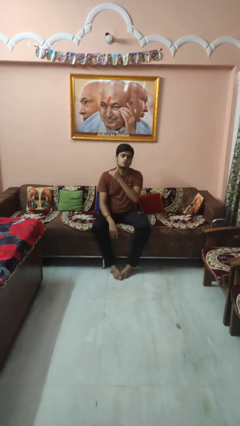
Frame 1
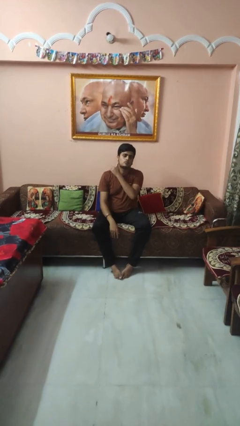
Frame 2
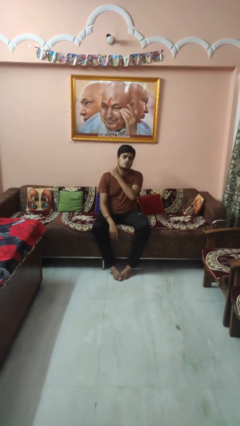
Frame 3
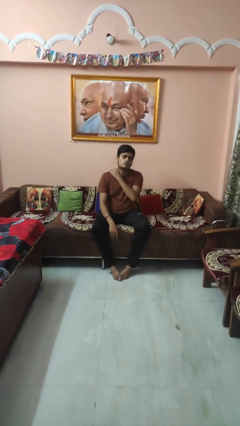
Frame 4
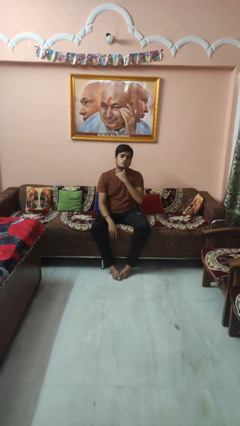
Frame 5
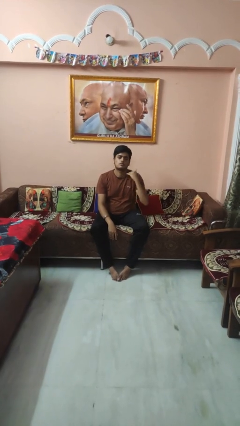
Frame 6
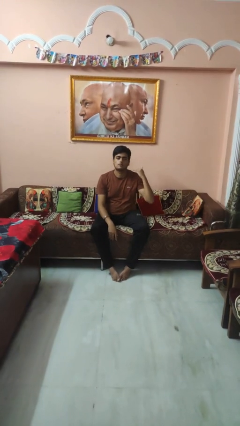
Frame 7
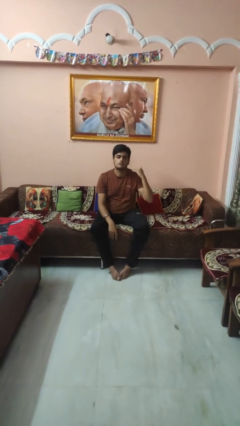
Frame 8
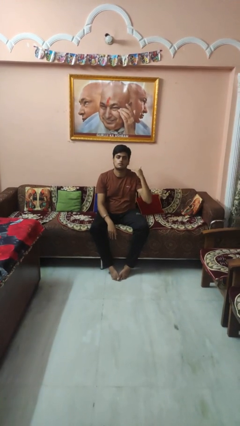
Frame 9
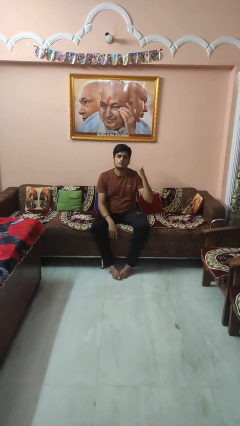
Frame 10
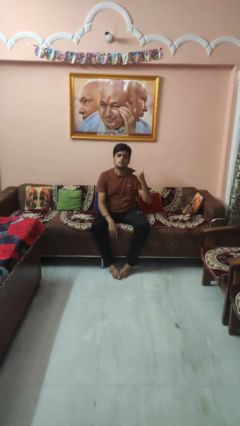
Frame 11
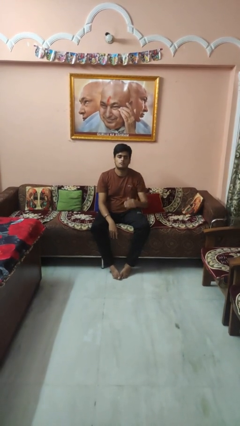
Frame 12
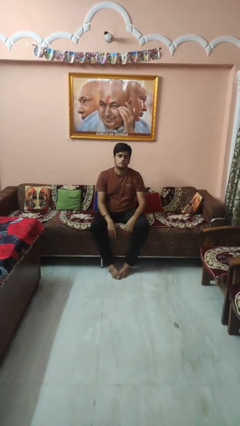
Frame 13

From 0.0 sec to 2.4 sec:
person gestures cut

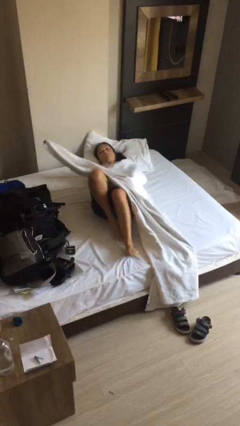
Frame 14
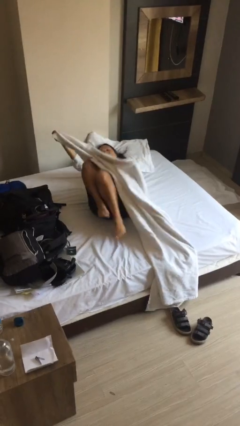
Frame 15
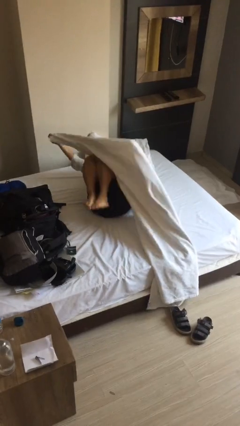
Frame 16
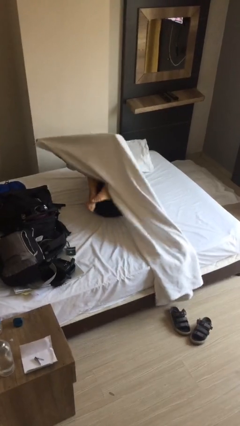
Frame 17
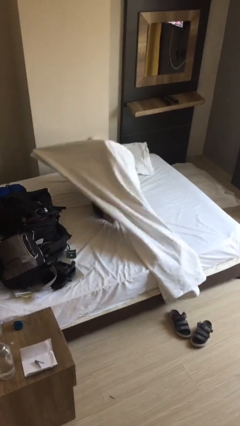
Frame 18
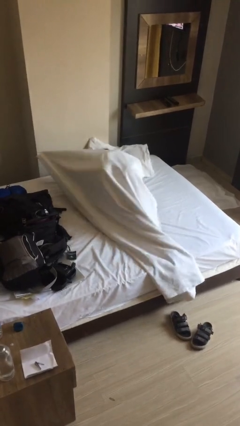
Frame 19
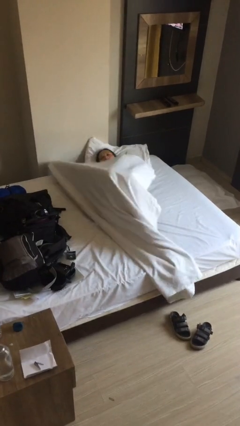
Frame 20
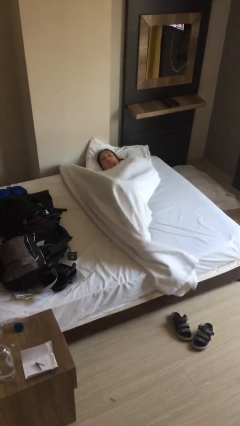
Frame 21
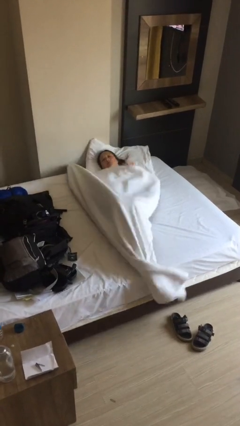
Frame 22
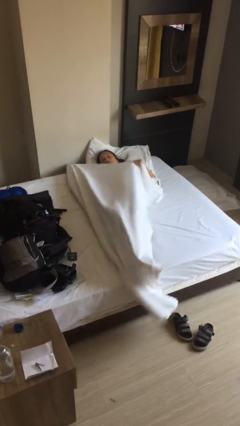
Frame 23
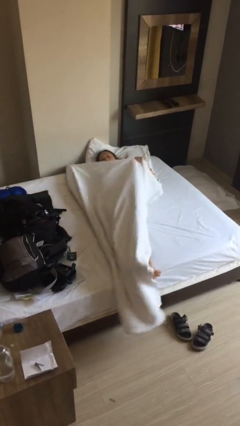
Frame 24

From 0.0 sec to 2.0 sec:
person covers with bedsheets

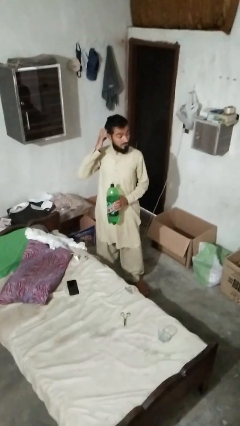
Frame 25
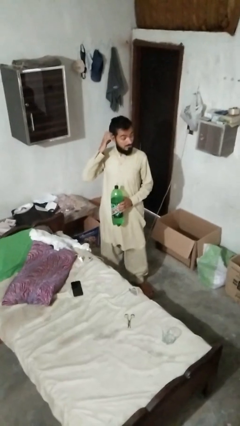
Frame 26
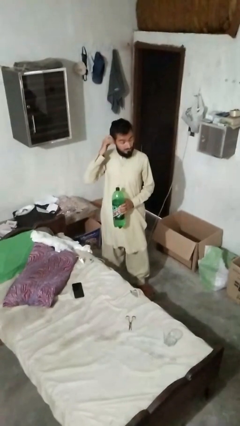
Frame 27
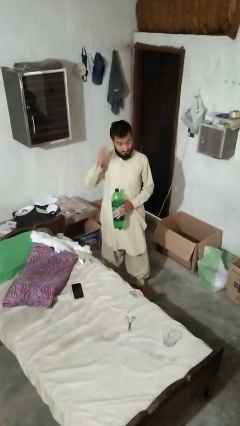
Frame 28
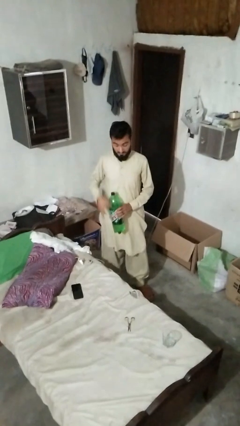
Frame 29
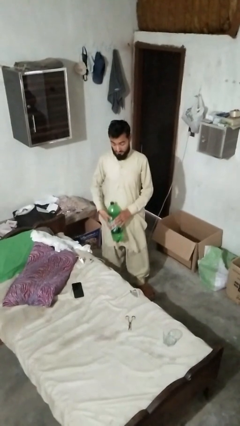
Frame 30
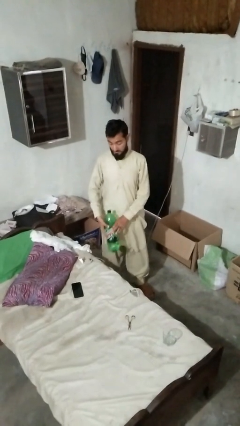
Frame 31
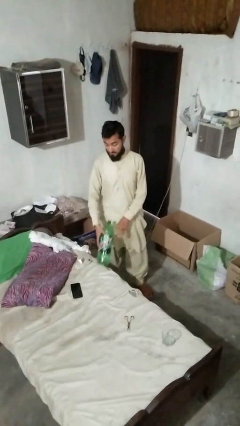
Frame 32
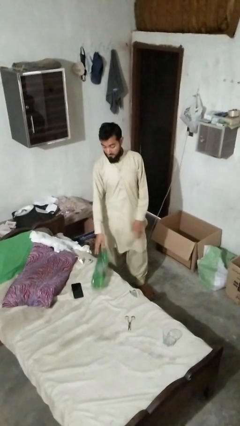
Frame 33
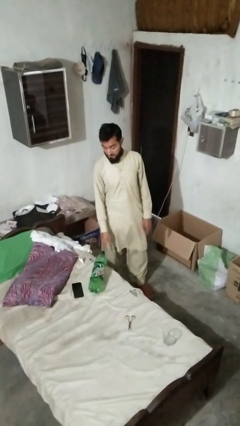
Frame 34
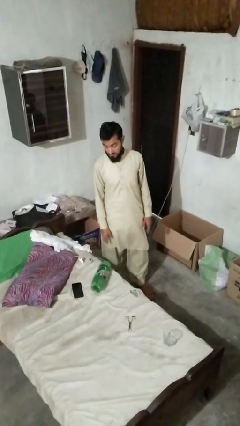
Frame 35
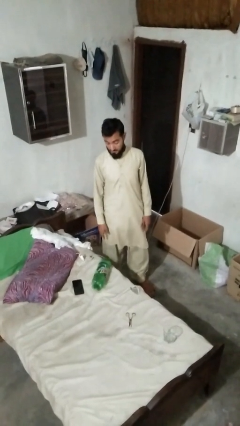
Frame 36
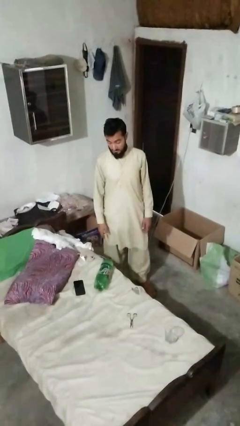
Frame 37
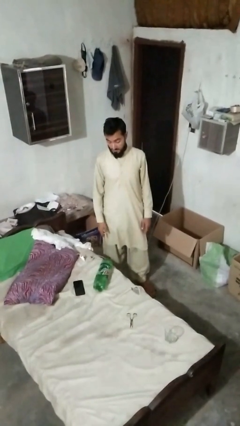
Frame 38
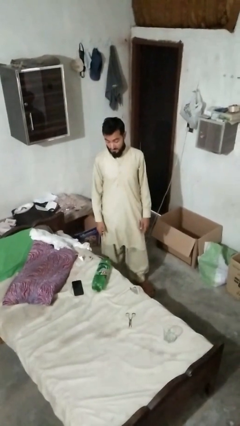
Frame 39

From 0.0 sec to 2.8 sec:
person puts down object on bed

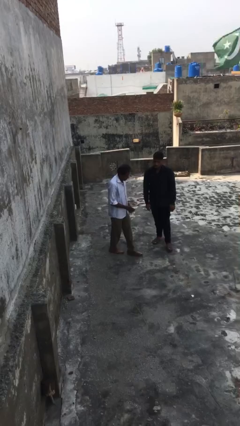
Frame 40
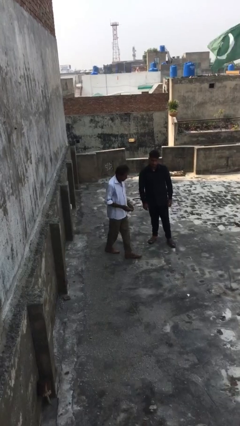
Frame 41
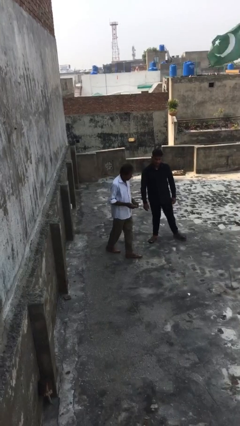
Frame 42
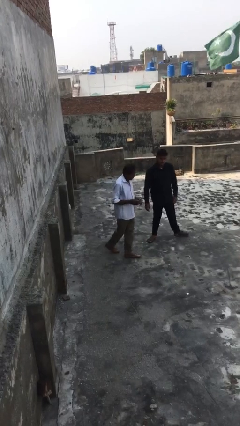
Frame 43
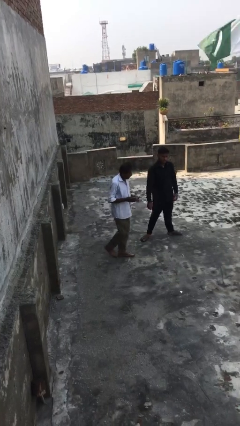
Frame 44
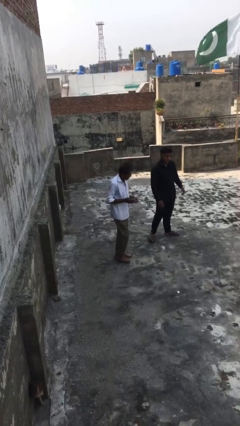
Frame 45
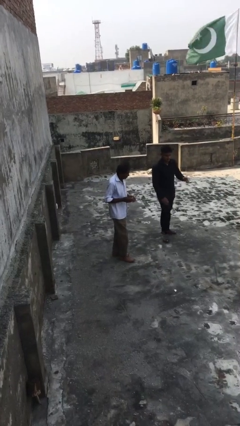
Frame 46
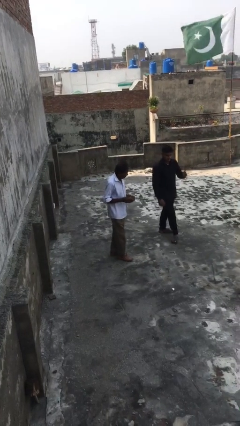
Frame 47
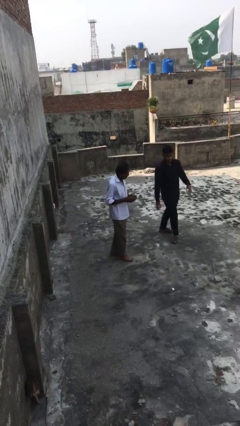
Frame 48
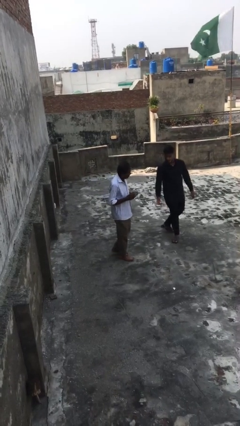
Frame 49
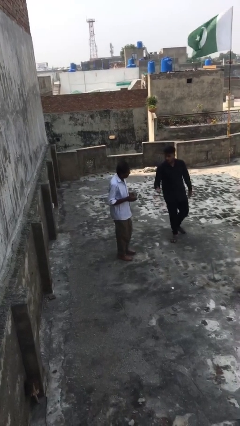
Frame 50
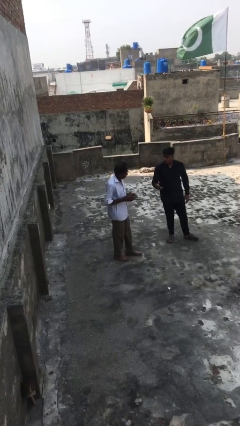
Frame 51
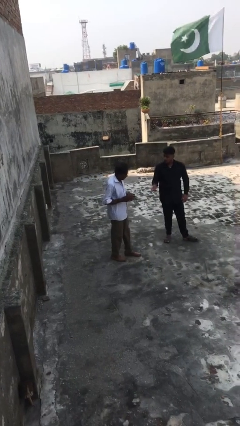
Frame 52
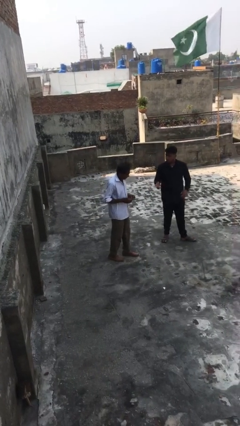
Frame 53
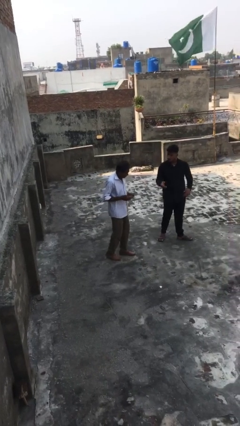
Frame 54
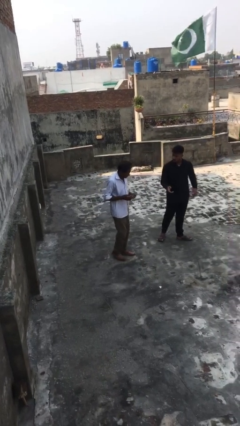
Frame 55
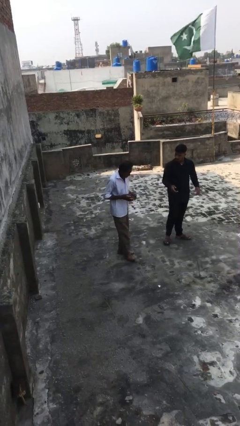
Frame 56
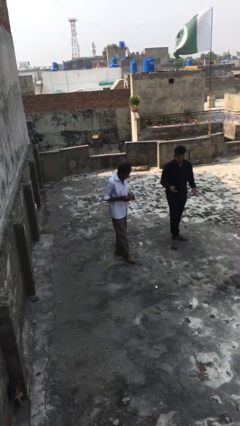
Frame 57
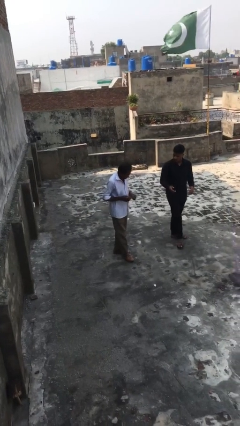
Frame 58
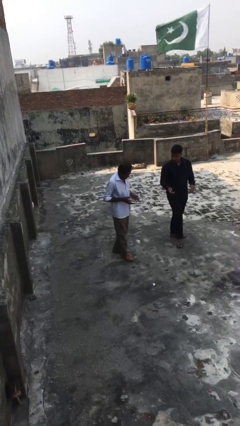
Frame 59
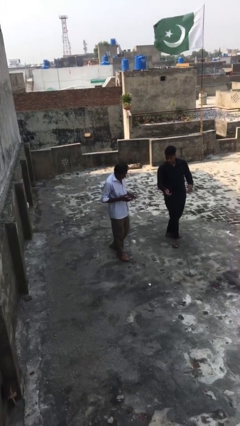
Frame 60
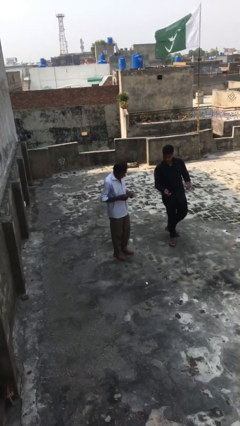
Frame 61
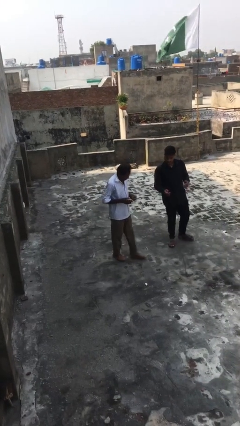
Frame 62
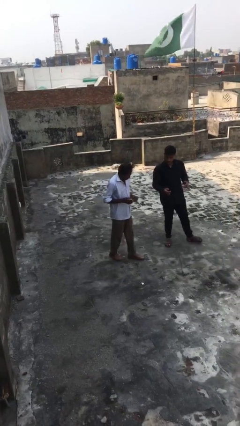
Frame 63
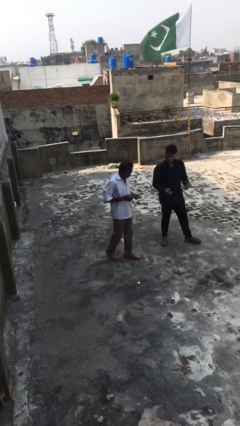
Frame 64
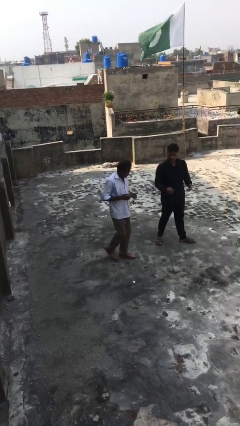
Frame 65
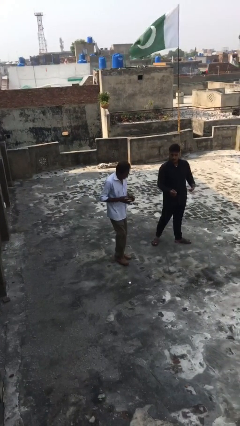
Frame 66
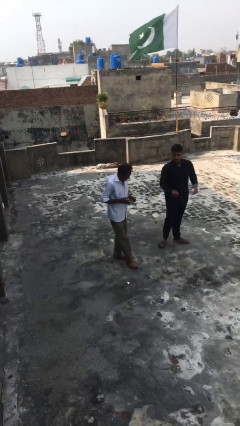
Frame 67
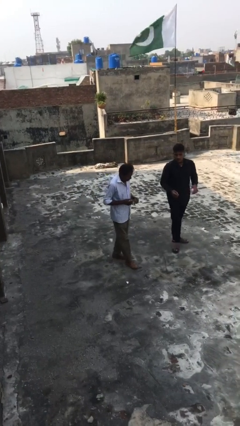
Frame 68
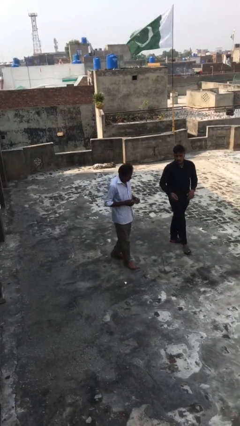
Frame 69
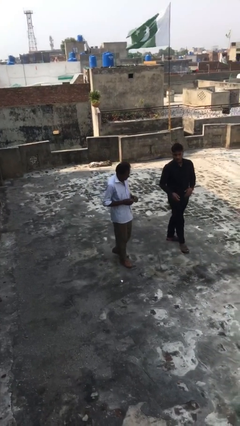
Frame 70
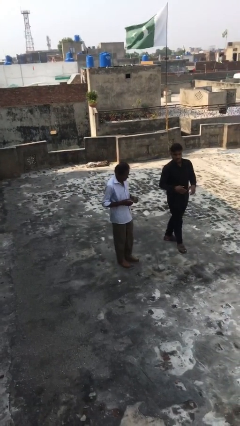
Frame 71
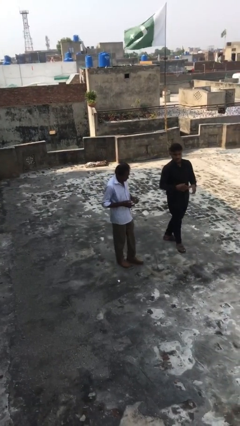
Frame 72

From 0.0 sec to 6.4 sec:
person talks to person

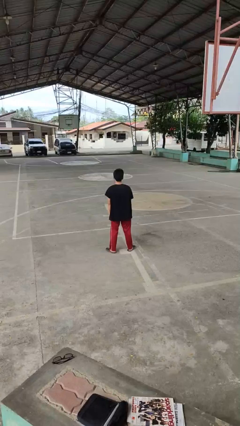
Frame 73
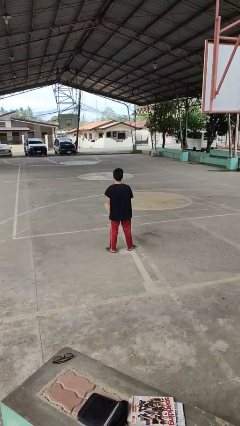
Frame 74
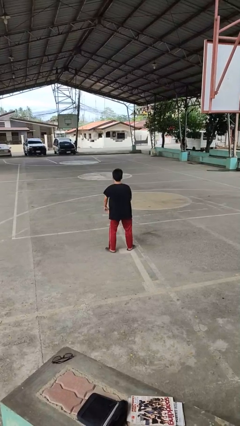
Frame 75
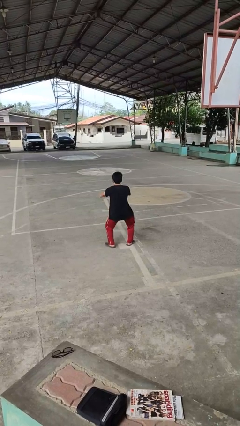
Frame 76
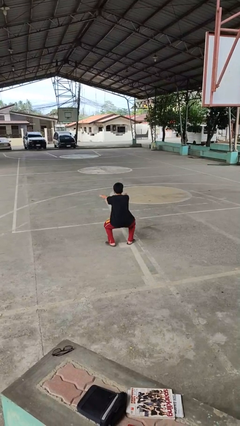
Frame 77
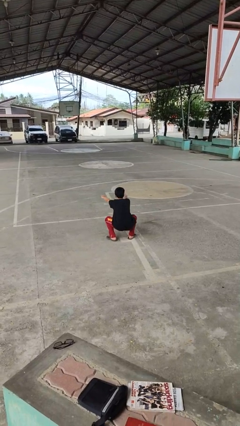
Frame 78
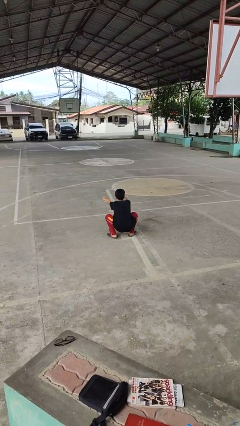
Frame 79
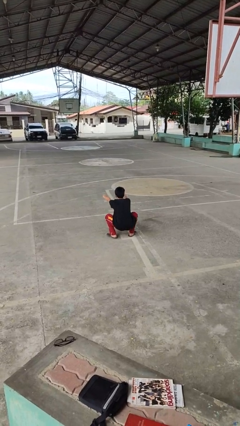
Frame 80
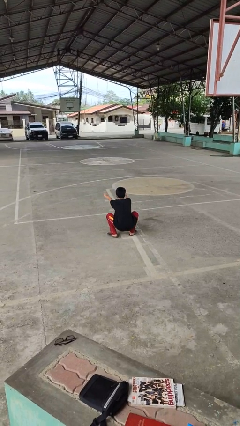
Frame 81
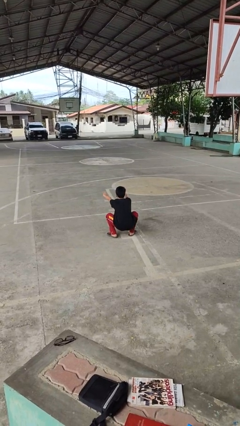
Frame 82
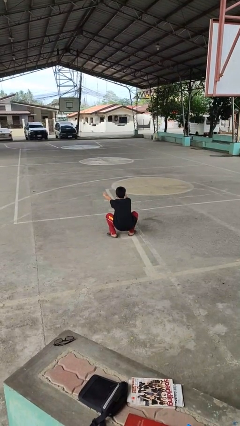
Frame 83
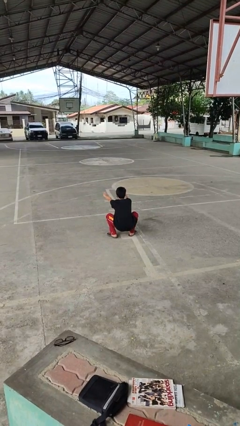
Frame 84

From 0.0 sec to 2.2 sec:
person squats

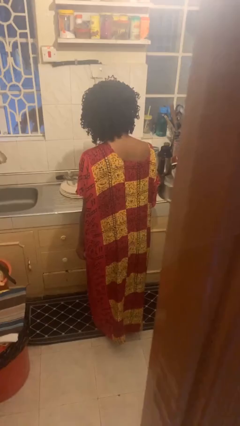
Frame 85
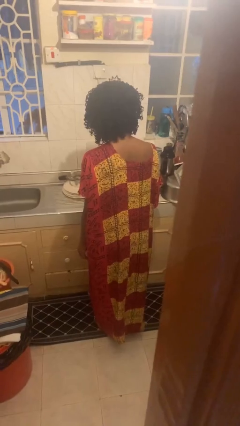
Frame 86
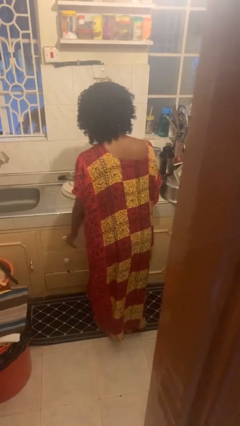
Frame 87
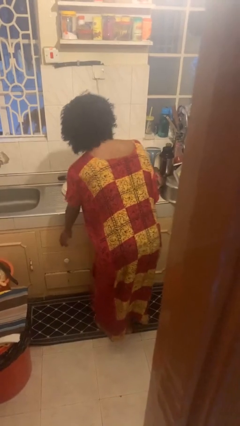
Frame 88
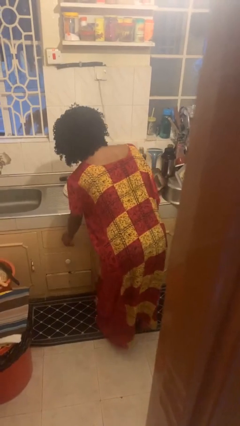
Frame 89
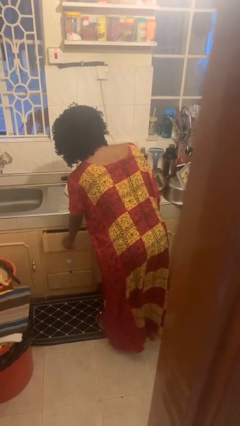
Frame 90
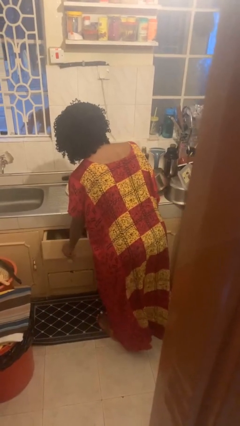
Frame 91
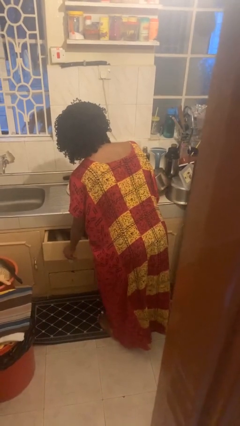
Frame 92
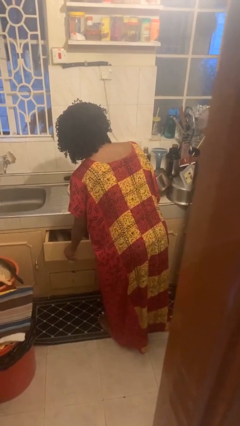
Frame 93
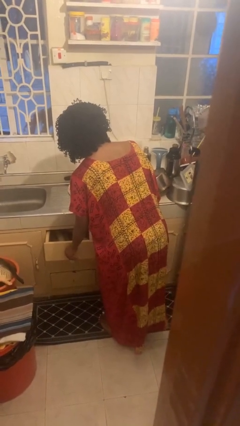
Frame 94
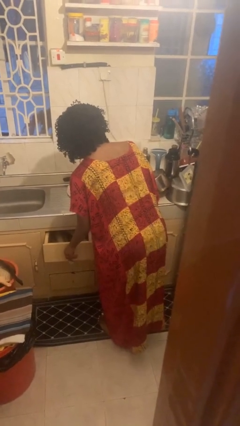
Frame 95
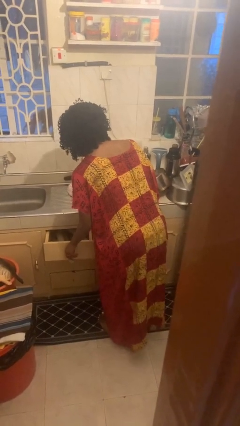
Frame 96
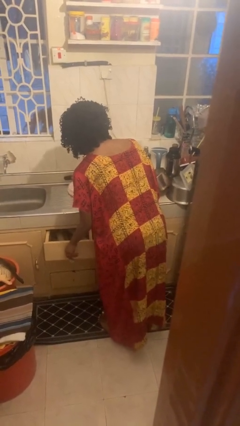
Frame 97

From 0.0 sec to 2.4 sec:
person opens kitchen drawer
